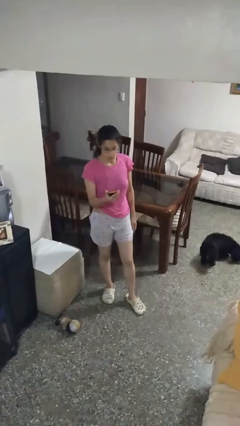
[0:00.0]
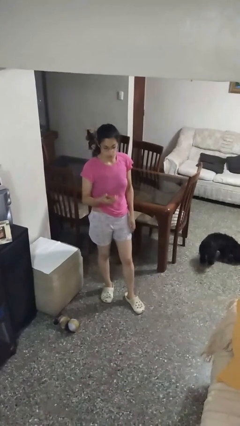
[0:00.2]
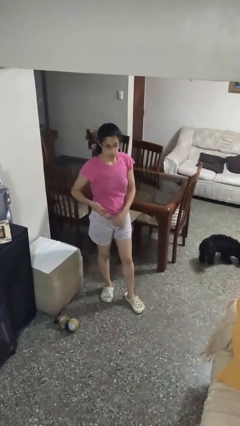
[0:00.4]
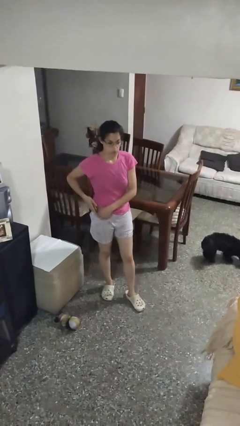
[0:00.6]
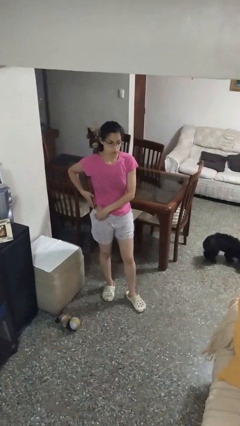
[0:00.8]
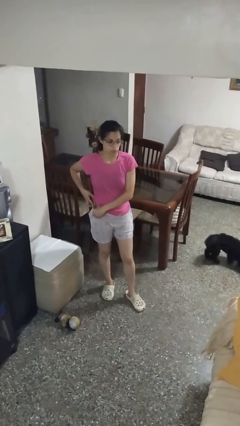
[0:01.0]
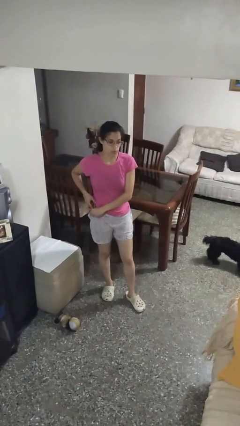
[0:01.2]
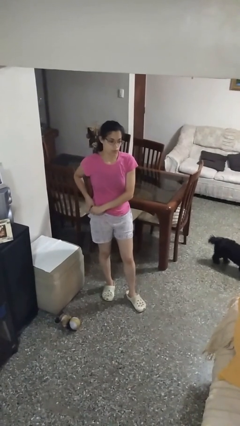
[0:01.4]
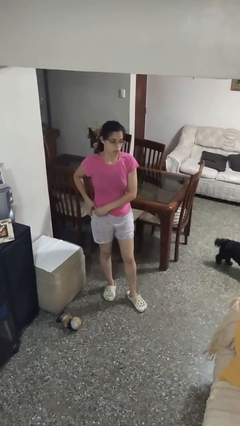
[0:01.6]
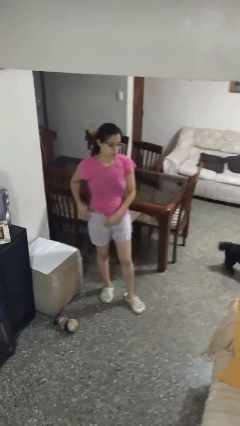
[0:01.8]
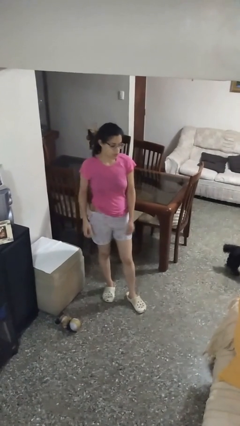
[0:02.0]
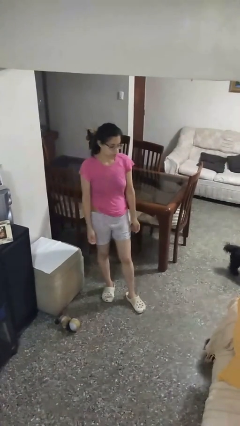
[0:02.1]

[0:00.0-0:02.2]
person puts phone into pocket

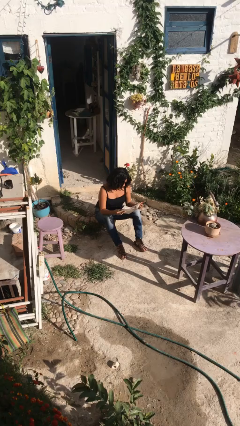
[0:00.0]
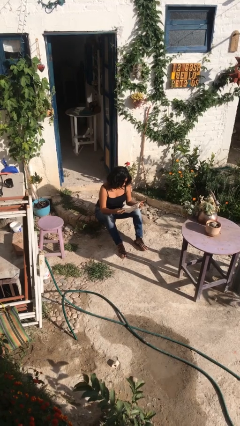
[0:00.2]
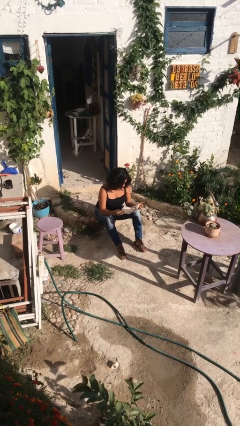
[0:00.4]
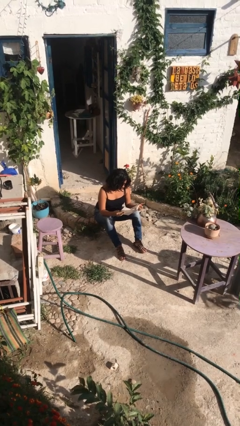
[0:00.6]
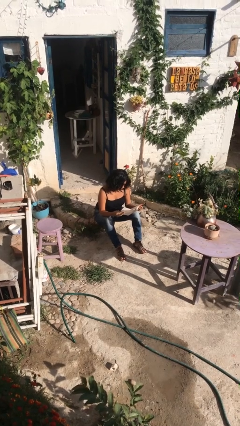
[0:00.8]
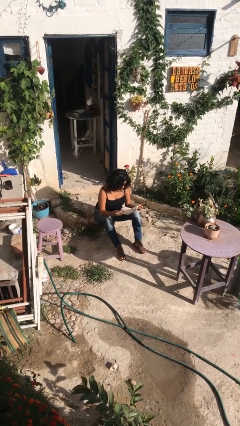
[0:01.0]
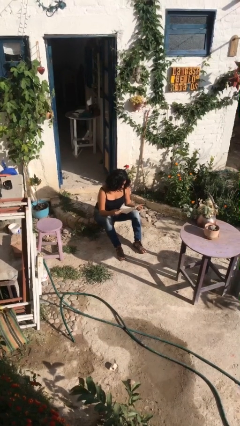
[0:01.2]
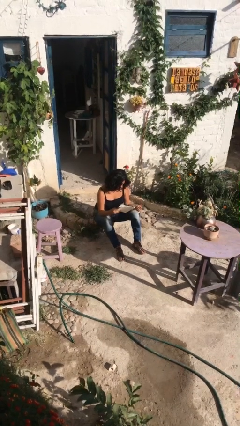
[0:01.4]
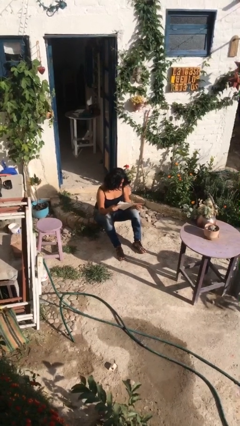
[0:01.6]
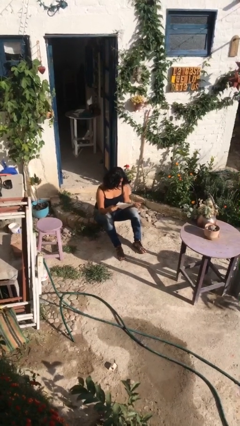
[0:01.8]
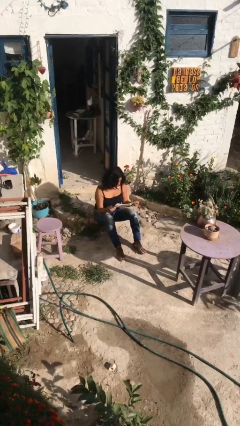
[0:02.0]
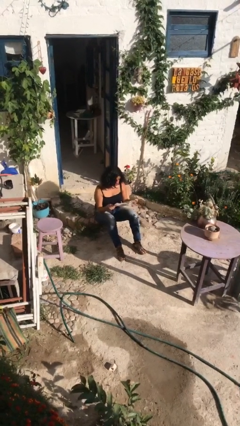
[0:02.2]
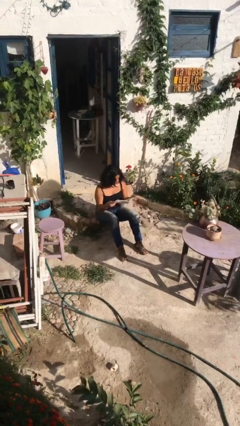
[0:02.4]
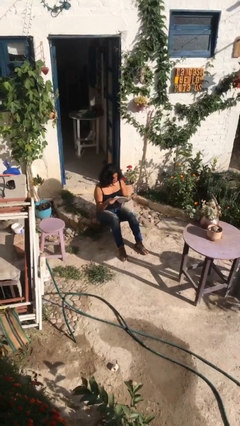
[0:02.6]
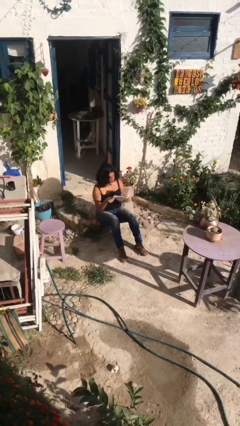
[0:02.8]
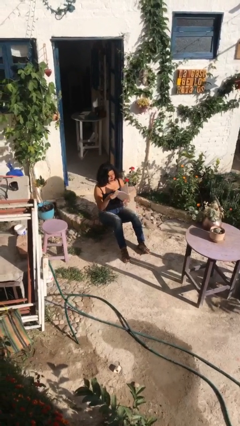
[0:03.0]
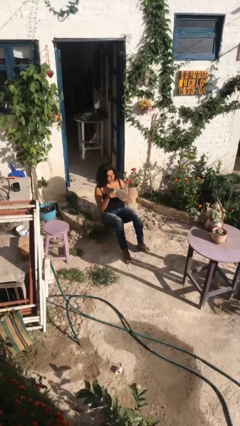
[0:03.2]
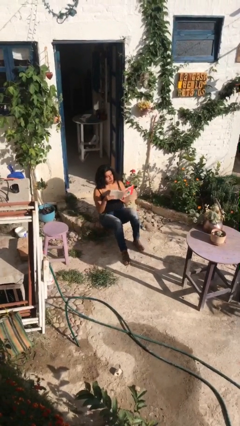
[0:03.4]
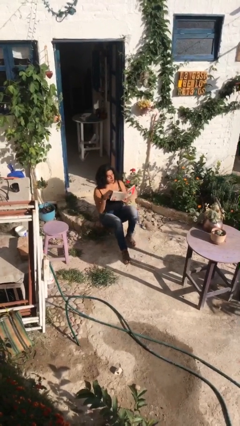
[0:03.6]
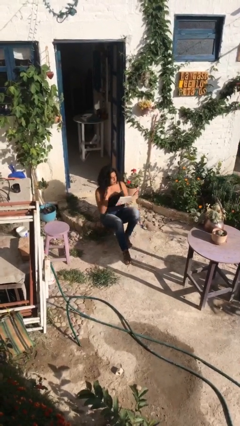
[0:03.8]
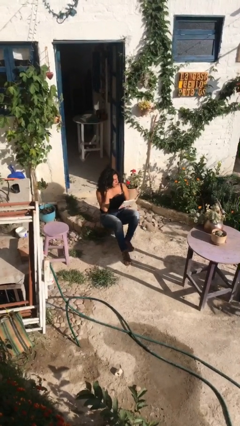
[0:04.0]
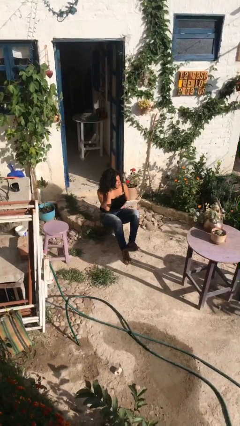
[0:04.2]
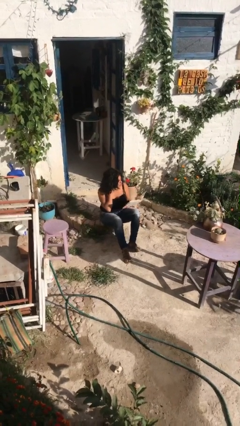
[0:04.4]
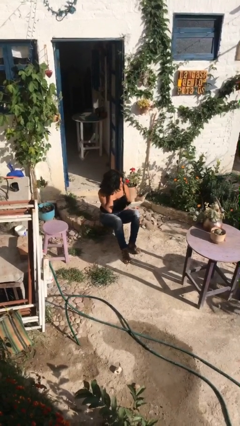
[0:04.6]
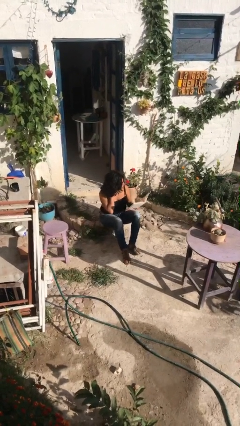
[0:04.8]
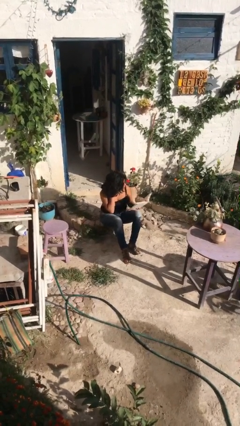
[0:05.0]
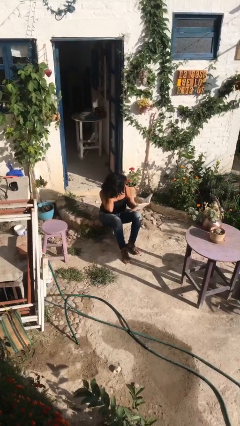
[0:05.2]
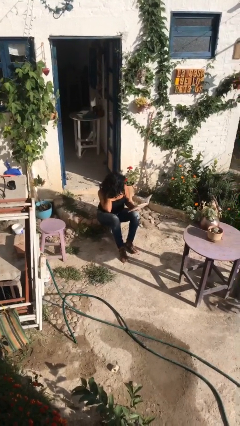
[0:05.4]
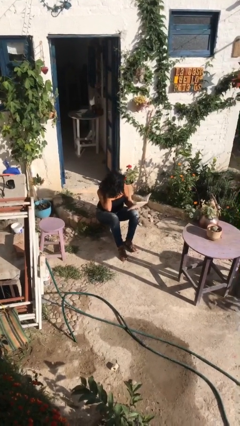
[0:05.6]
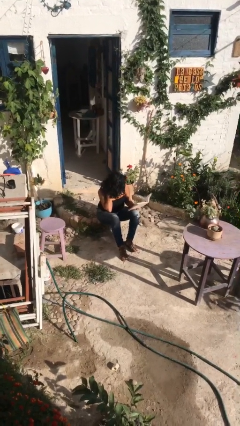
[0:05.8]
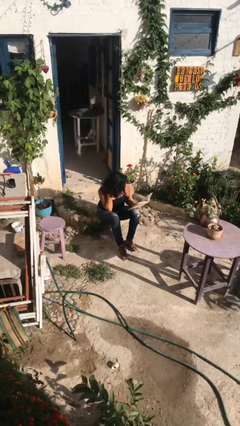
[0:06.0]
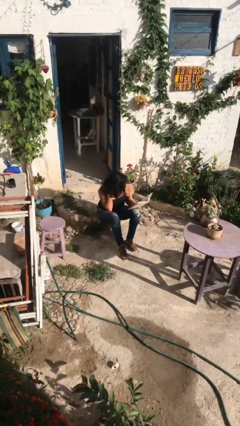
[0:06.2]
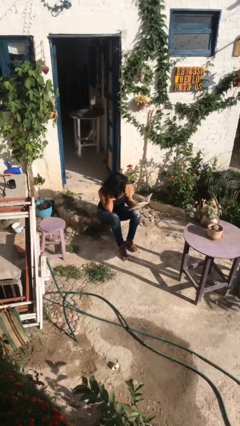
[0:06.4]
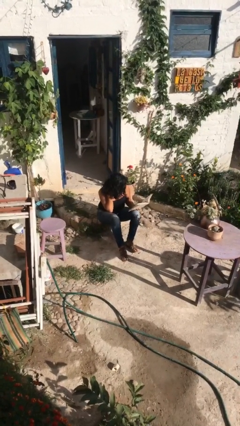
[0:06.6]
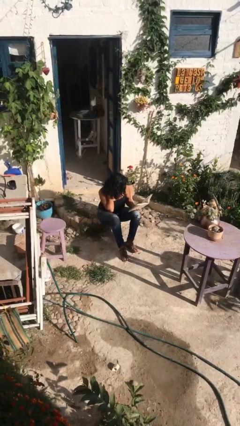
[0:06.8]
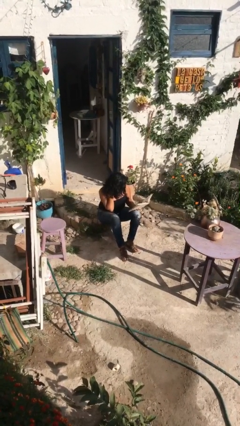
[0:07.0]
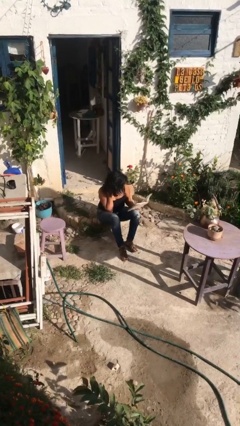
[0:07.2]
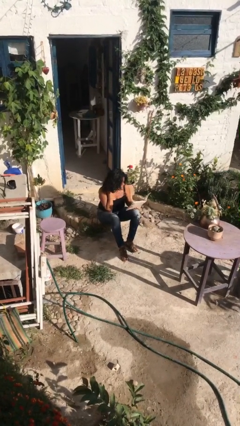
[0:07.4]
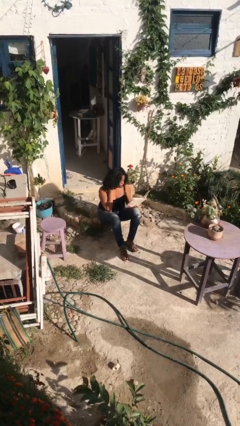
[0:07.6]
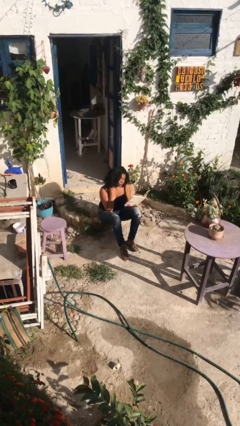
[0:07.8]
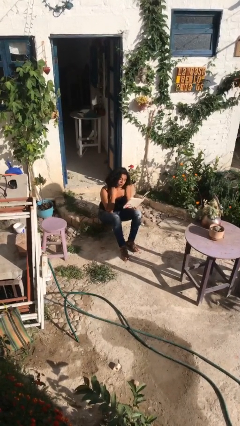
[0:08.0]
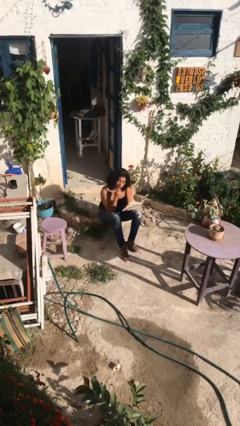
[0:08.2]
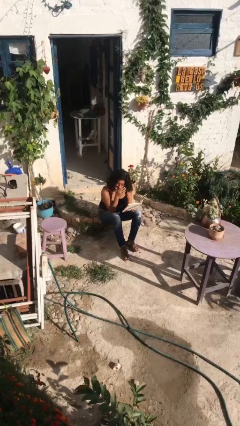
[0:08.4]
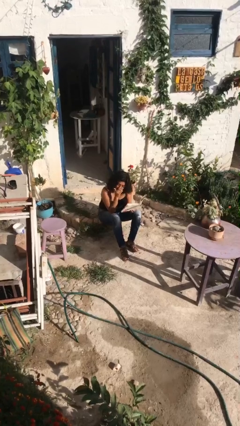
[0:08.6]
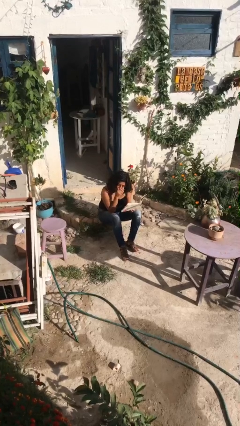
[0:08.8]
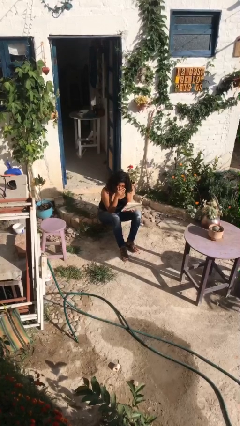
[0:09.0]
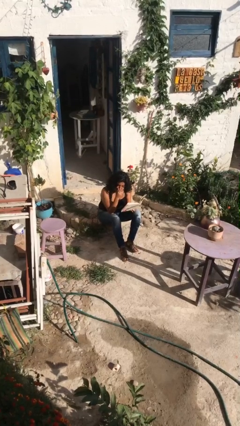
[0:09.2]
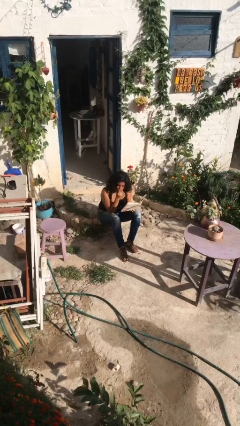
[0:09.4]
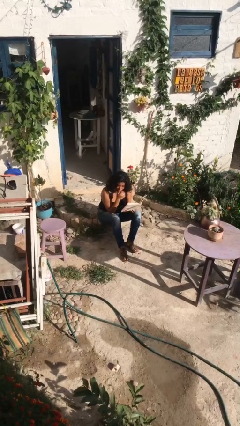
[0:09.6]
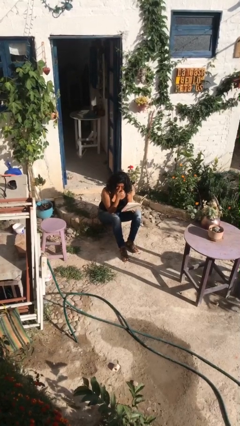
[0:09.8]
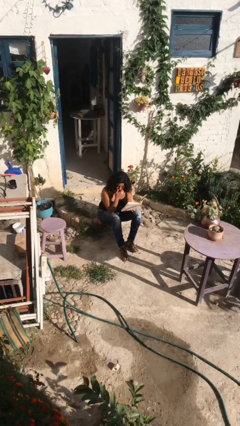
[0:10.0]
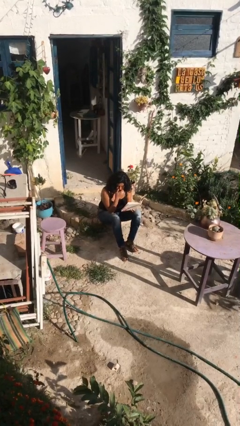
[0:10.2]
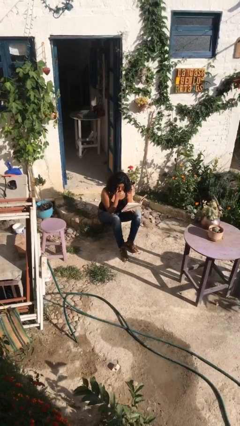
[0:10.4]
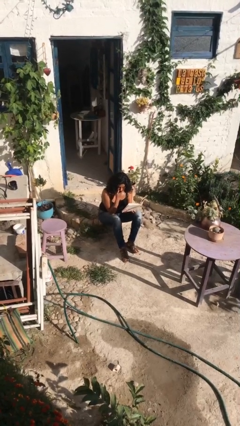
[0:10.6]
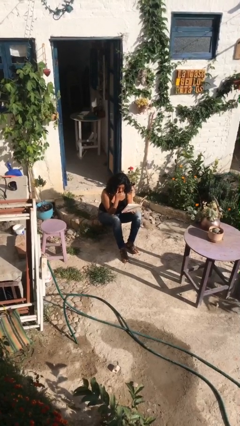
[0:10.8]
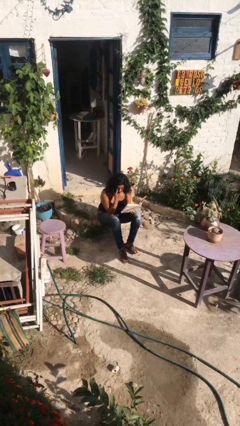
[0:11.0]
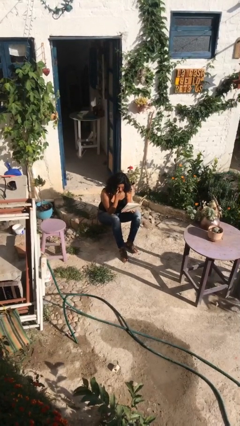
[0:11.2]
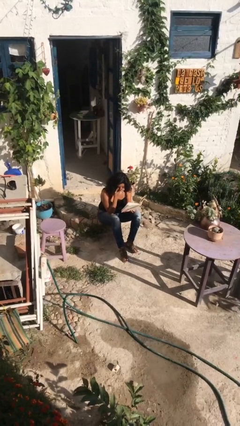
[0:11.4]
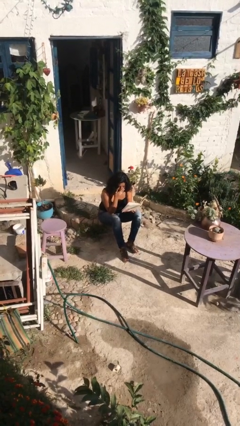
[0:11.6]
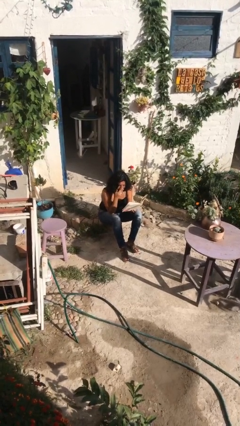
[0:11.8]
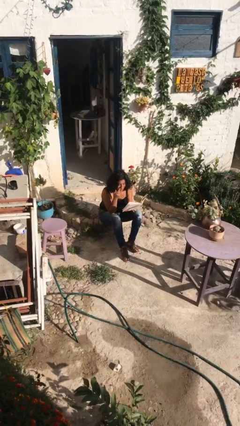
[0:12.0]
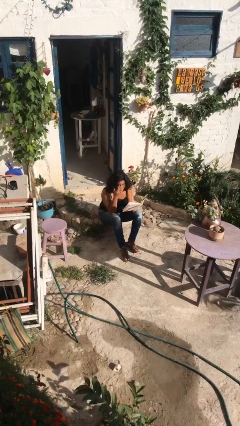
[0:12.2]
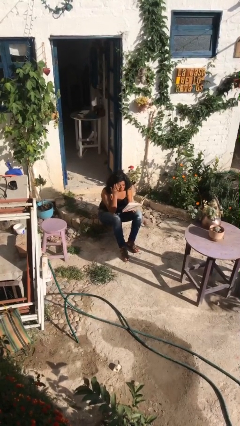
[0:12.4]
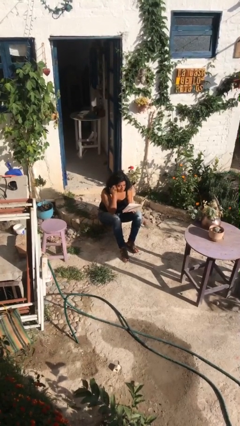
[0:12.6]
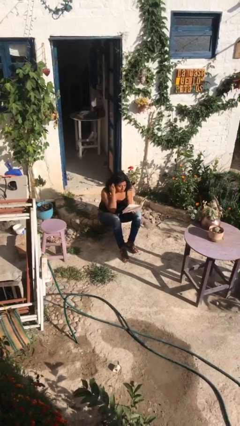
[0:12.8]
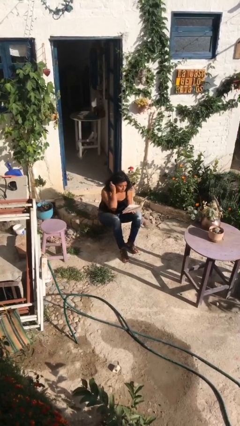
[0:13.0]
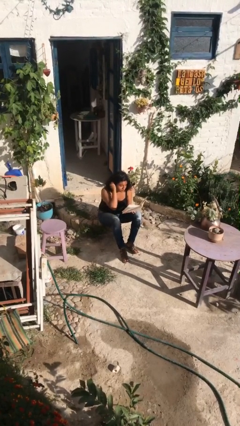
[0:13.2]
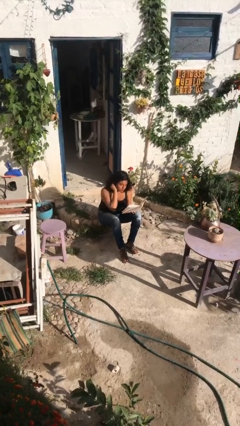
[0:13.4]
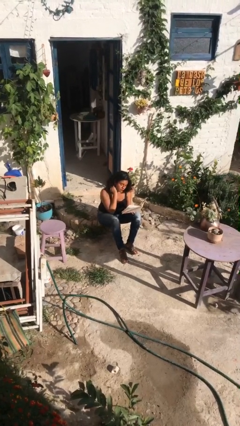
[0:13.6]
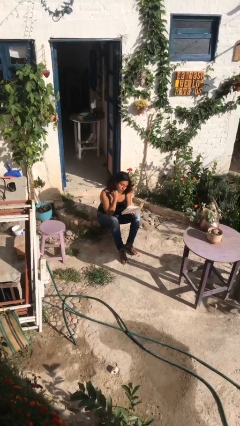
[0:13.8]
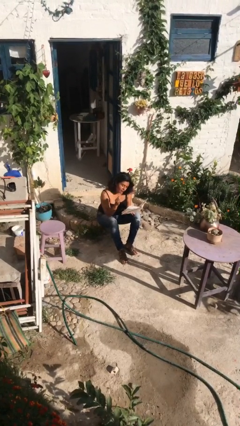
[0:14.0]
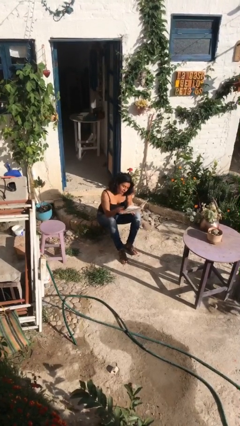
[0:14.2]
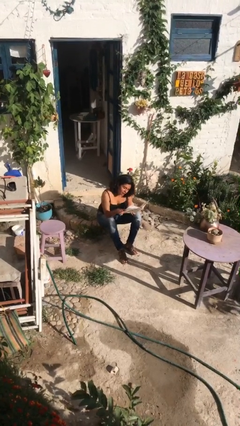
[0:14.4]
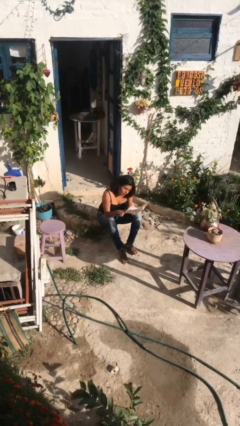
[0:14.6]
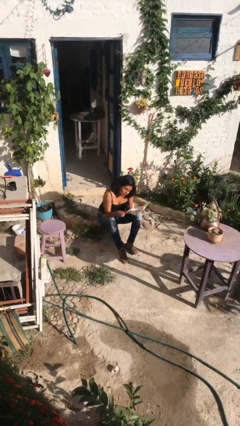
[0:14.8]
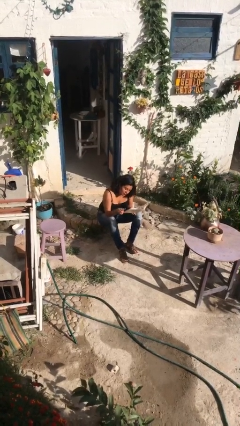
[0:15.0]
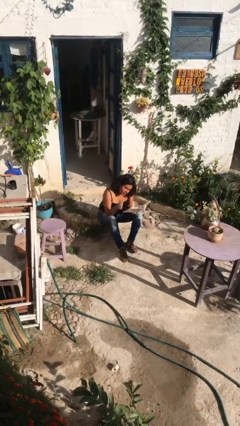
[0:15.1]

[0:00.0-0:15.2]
person reads document

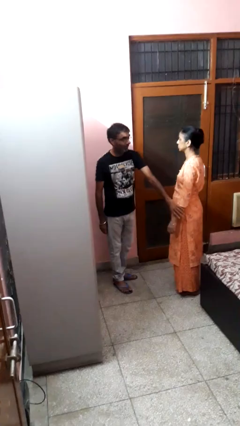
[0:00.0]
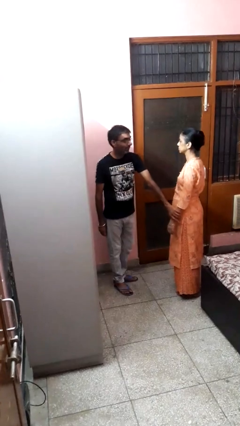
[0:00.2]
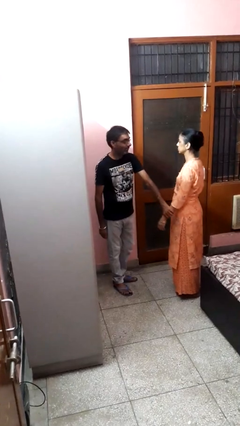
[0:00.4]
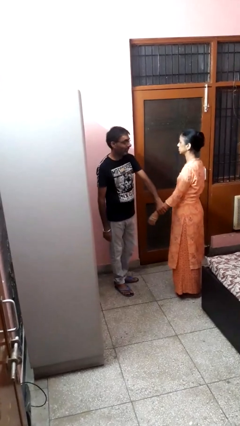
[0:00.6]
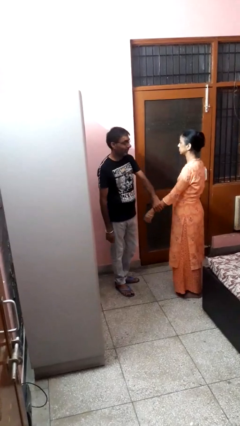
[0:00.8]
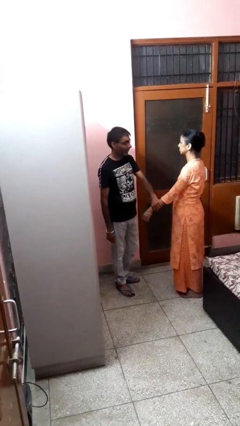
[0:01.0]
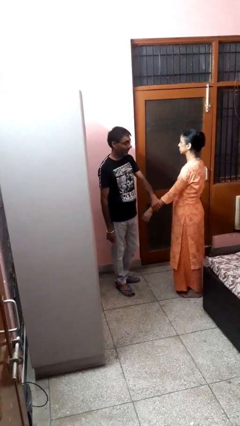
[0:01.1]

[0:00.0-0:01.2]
person grabs person by forearm
